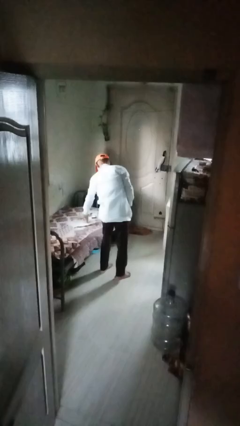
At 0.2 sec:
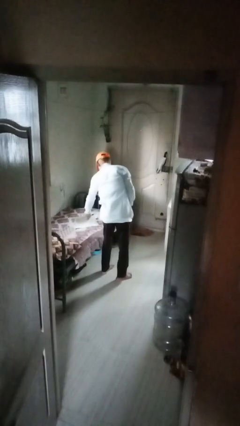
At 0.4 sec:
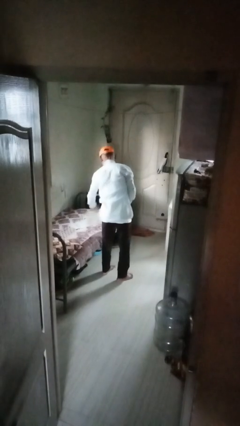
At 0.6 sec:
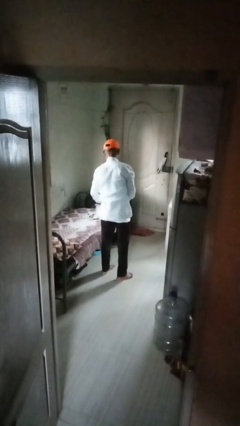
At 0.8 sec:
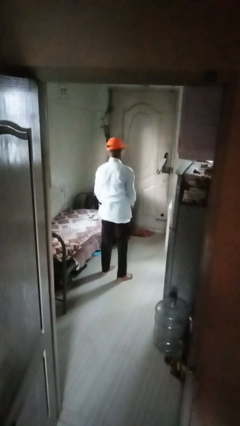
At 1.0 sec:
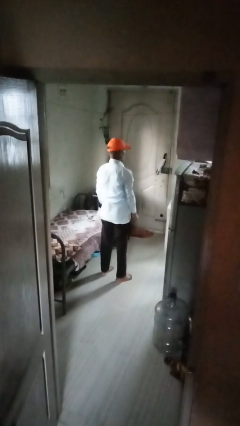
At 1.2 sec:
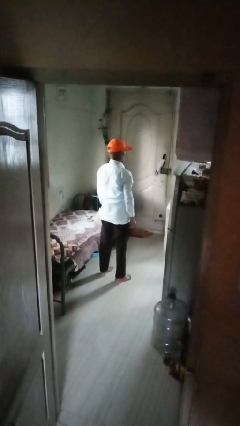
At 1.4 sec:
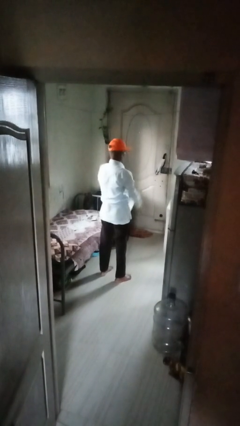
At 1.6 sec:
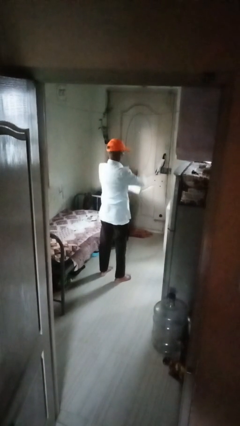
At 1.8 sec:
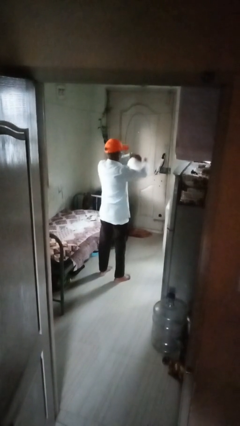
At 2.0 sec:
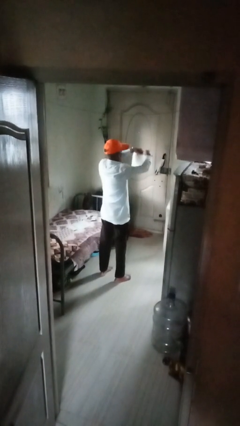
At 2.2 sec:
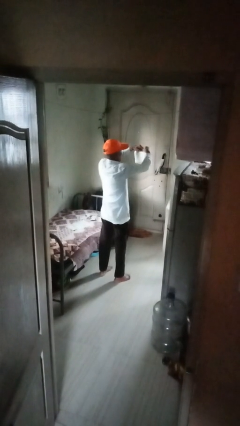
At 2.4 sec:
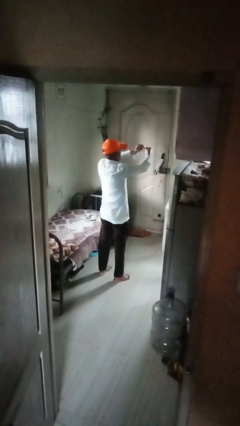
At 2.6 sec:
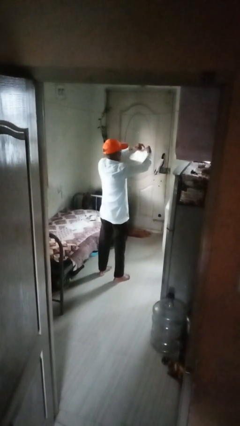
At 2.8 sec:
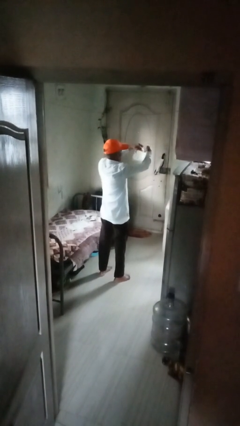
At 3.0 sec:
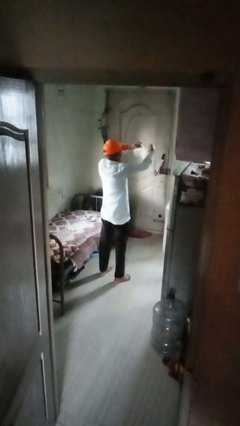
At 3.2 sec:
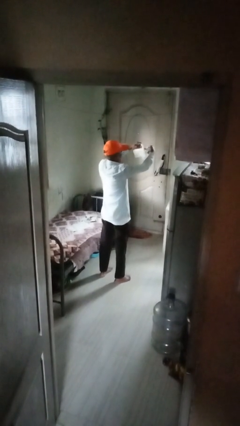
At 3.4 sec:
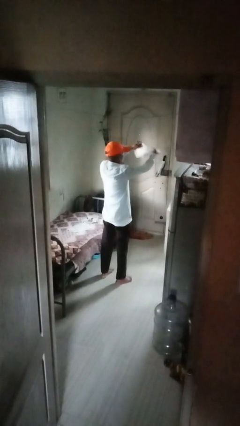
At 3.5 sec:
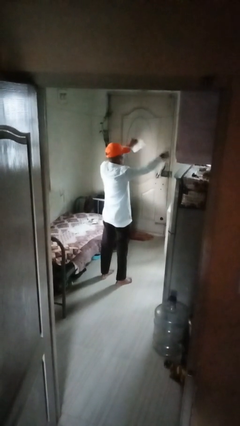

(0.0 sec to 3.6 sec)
person tears paper

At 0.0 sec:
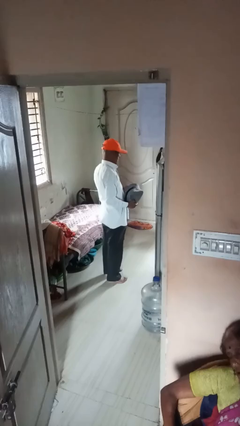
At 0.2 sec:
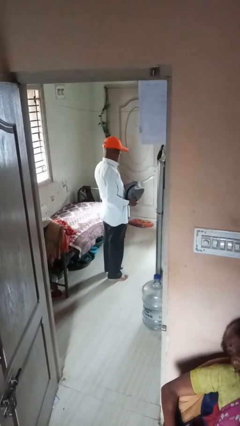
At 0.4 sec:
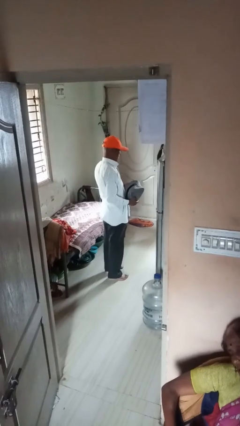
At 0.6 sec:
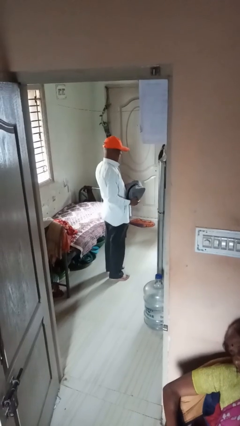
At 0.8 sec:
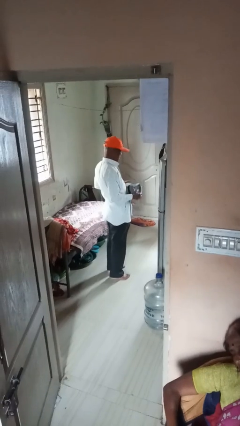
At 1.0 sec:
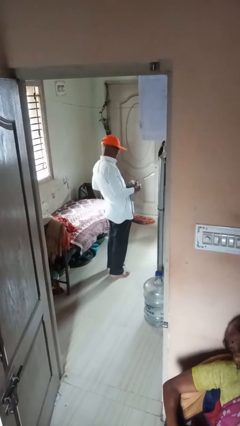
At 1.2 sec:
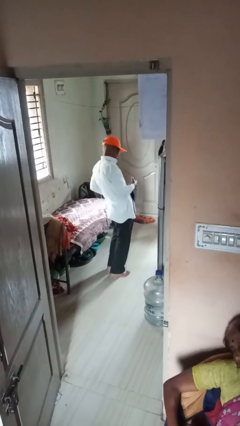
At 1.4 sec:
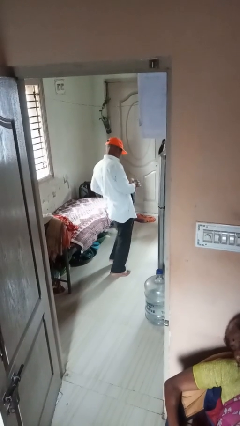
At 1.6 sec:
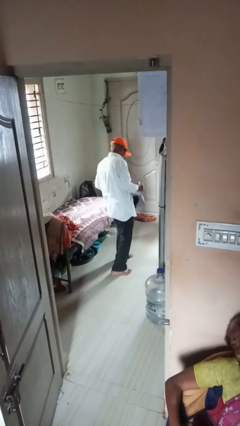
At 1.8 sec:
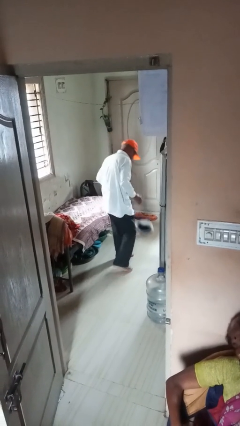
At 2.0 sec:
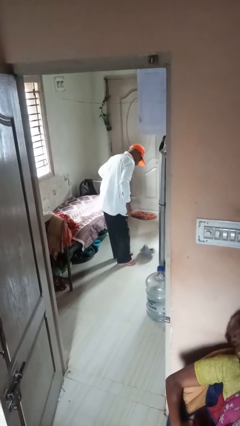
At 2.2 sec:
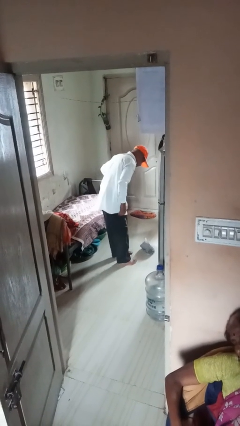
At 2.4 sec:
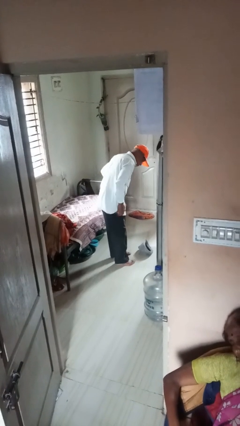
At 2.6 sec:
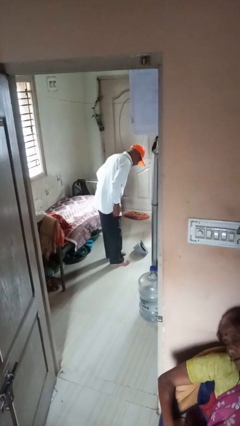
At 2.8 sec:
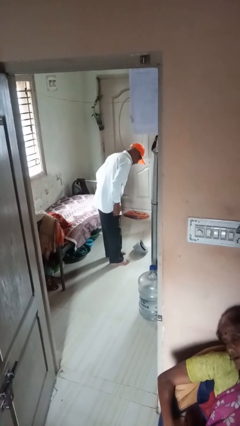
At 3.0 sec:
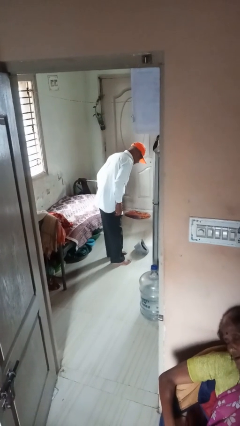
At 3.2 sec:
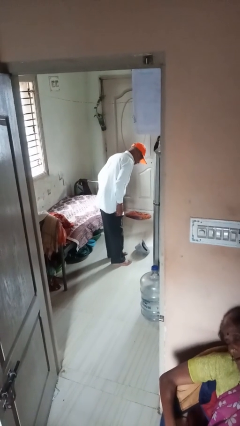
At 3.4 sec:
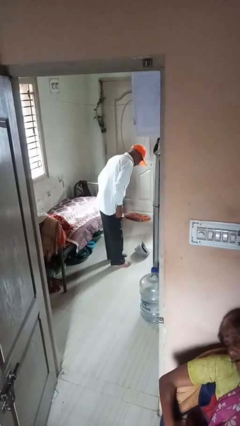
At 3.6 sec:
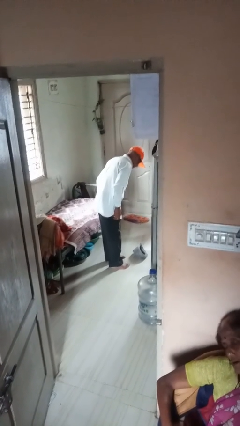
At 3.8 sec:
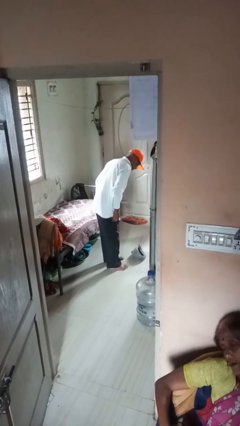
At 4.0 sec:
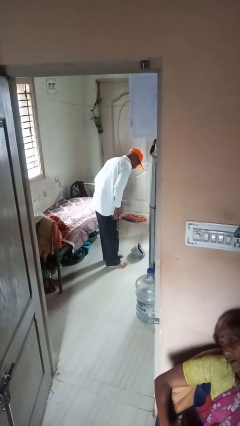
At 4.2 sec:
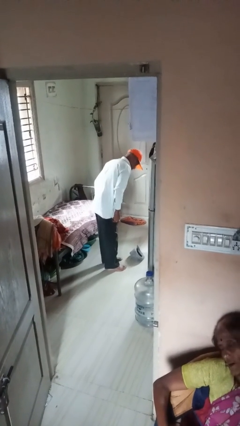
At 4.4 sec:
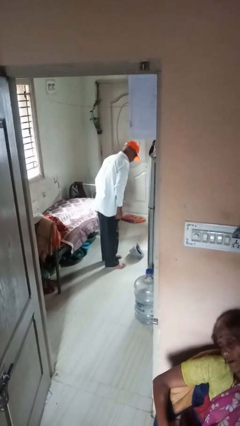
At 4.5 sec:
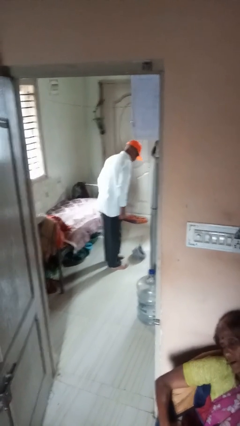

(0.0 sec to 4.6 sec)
person drops object

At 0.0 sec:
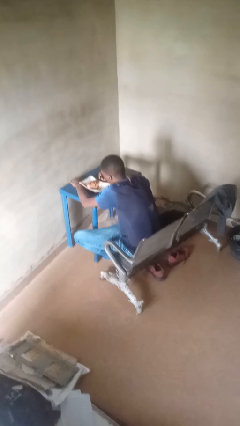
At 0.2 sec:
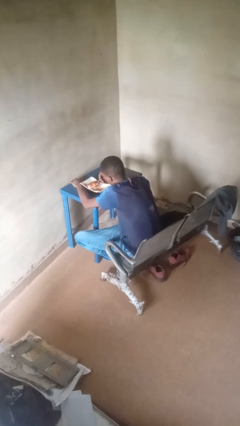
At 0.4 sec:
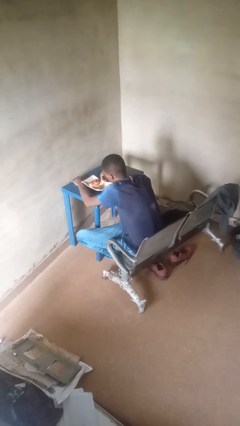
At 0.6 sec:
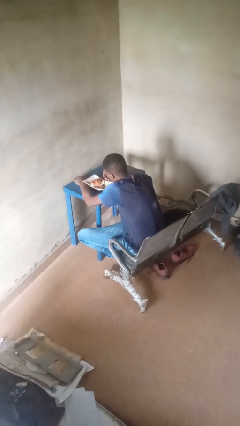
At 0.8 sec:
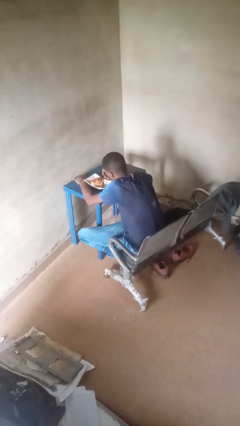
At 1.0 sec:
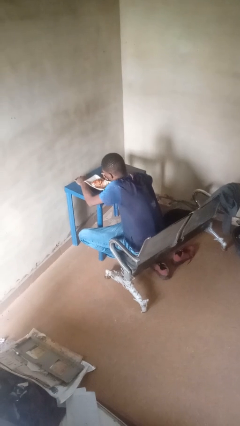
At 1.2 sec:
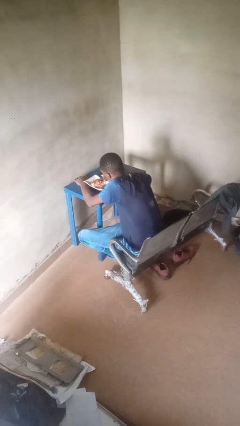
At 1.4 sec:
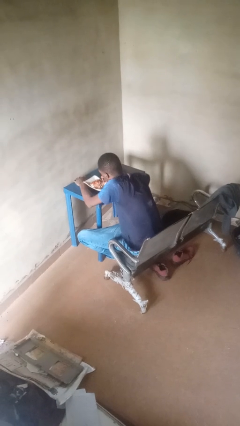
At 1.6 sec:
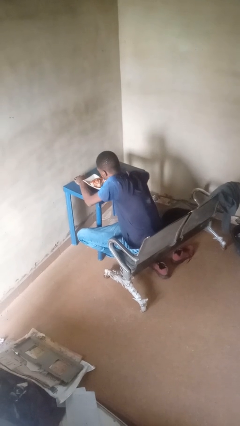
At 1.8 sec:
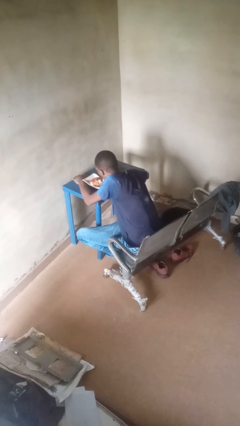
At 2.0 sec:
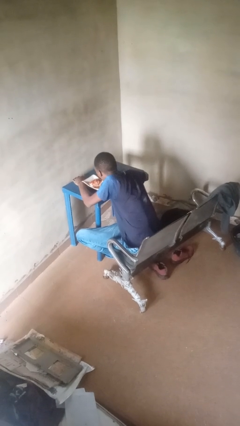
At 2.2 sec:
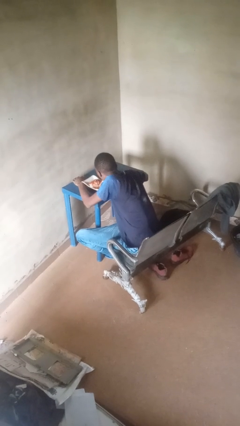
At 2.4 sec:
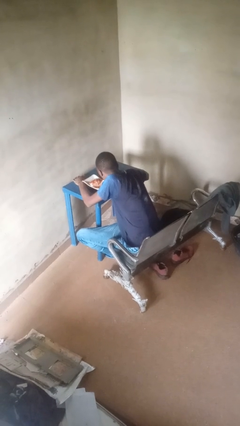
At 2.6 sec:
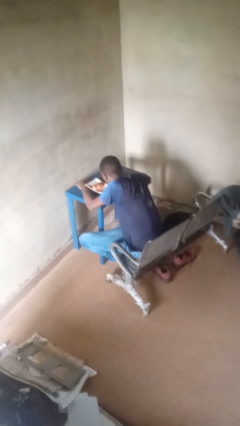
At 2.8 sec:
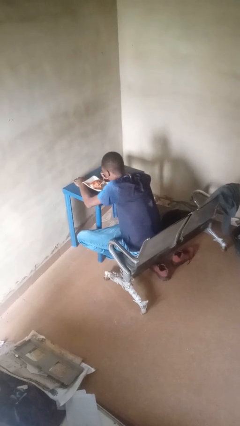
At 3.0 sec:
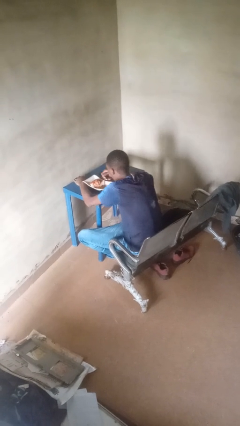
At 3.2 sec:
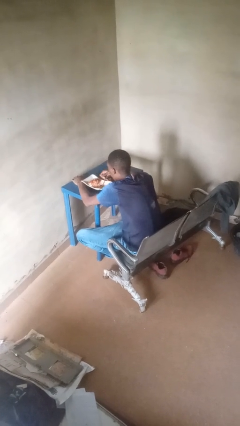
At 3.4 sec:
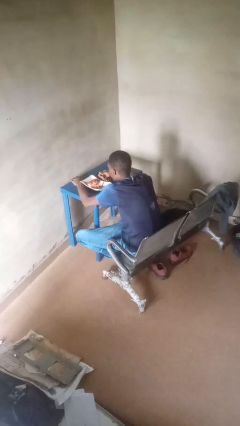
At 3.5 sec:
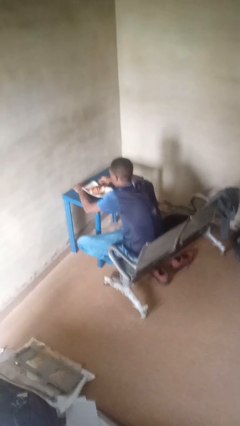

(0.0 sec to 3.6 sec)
person eats with utensil

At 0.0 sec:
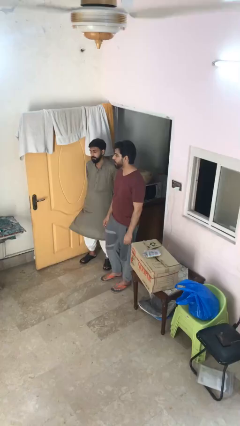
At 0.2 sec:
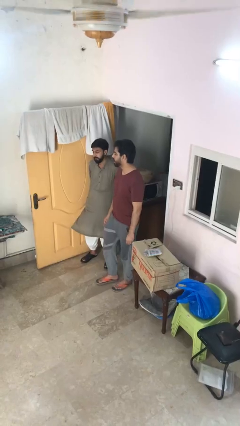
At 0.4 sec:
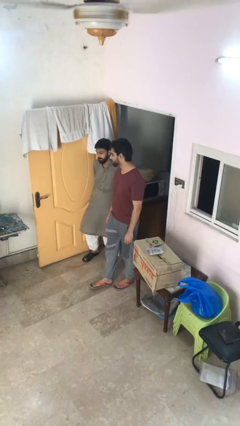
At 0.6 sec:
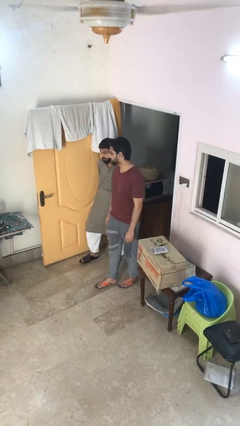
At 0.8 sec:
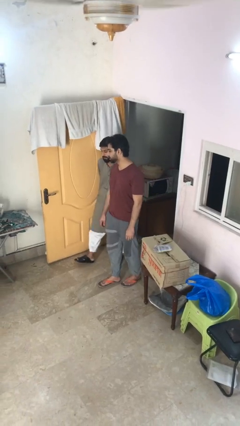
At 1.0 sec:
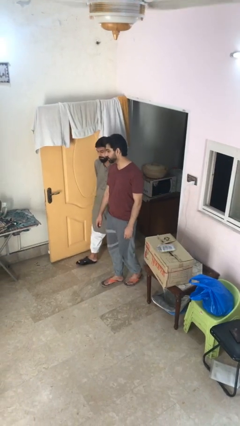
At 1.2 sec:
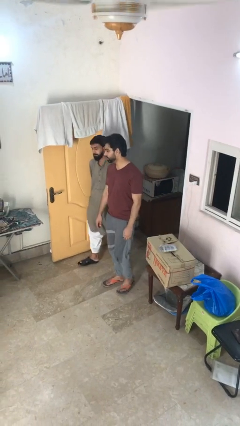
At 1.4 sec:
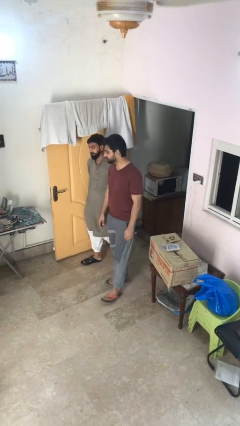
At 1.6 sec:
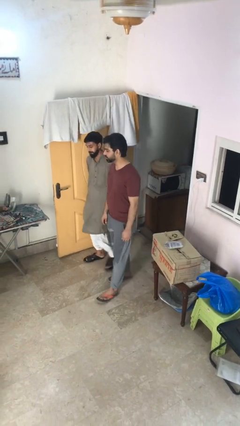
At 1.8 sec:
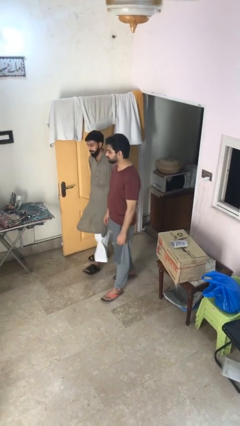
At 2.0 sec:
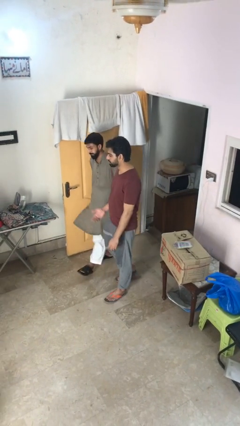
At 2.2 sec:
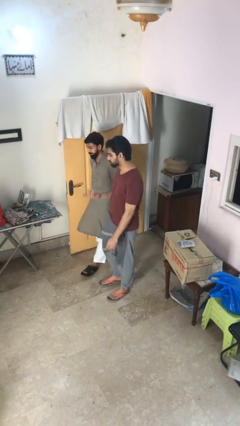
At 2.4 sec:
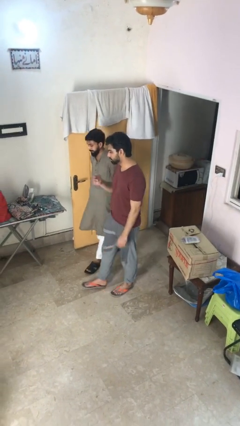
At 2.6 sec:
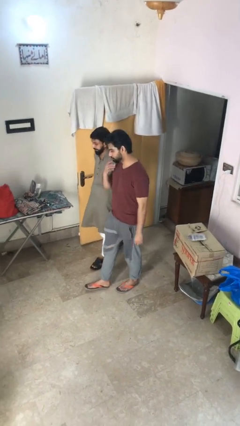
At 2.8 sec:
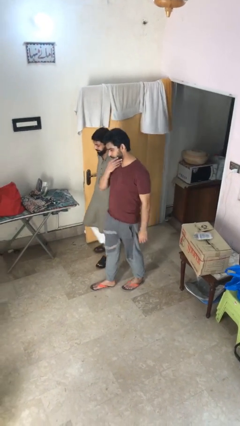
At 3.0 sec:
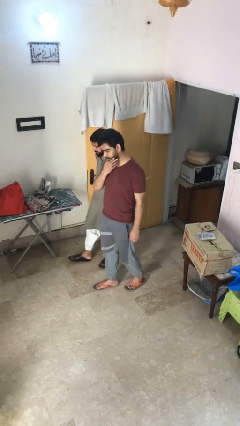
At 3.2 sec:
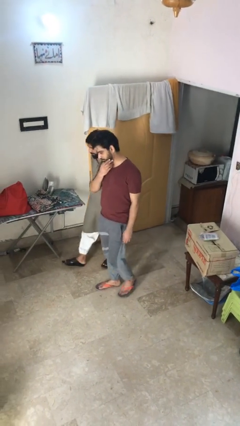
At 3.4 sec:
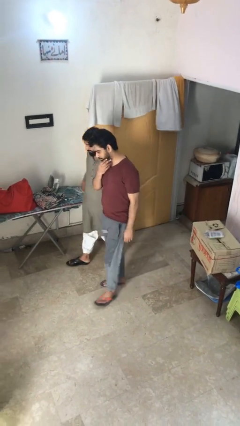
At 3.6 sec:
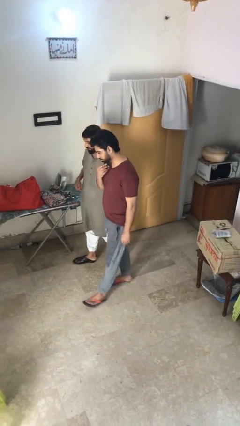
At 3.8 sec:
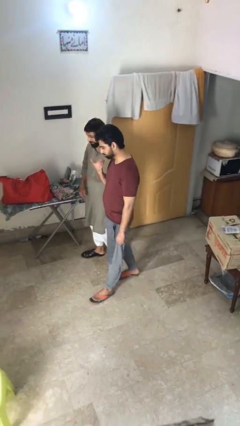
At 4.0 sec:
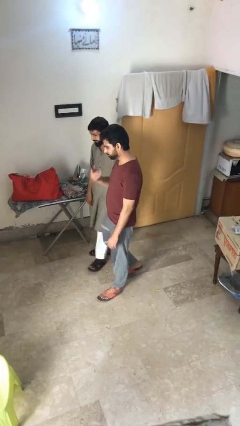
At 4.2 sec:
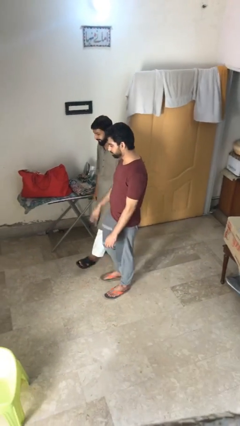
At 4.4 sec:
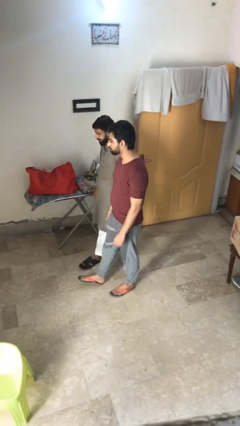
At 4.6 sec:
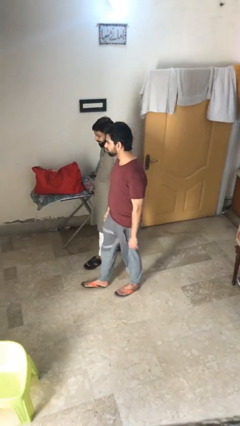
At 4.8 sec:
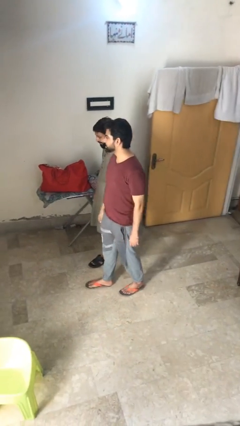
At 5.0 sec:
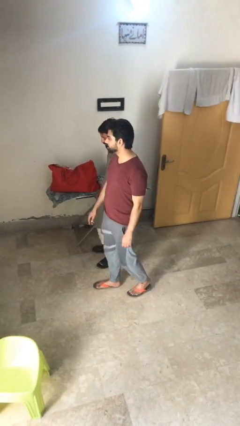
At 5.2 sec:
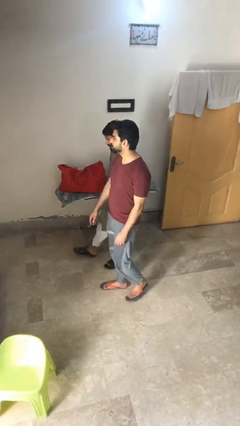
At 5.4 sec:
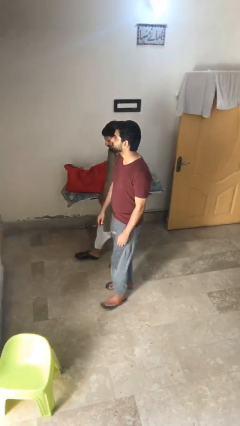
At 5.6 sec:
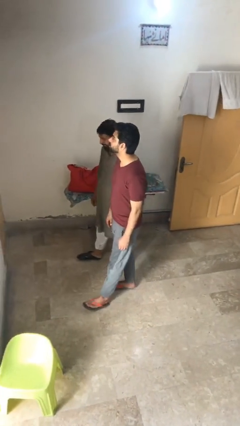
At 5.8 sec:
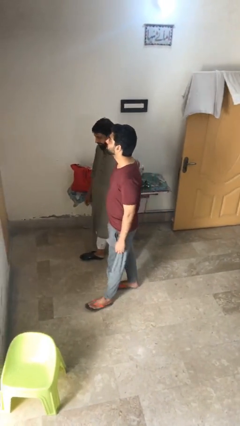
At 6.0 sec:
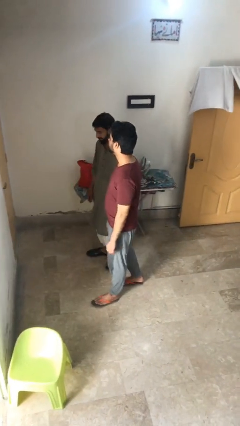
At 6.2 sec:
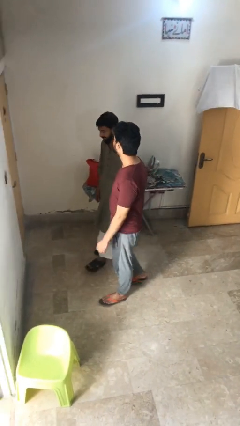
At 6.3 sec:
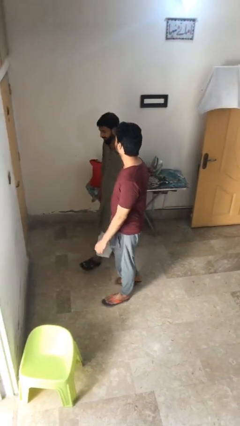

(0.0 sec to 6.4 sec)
person talks to person
